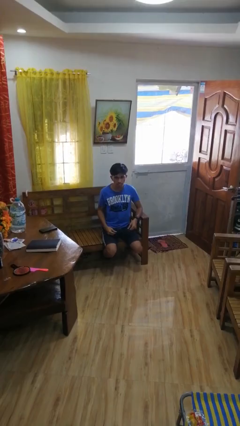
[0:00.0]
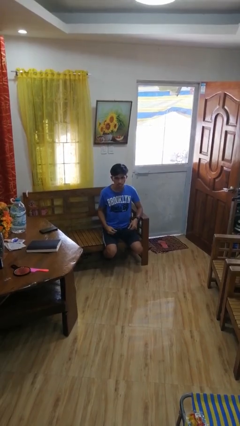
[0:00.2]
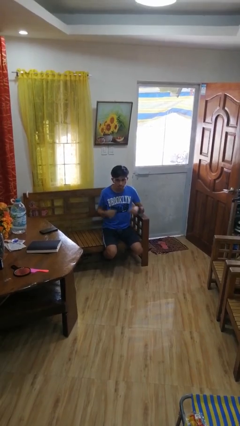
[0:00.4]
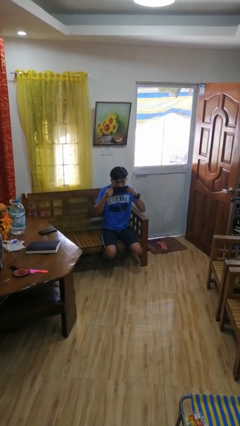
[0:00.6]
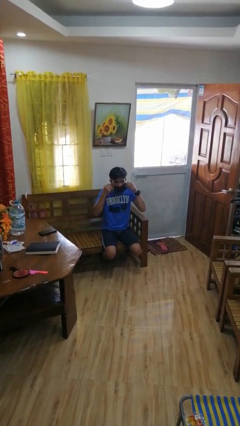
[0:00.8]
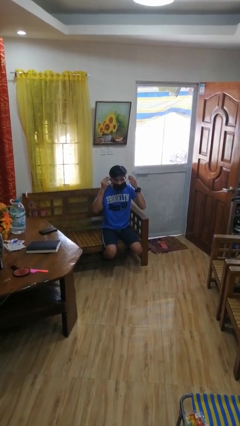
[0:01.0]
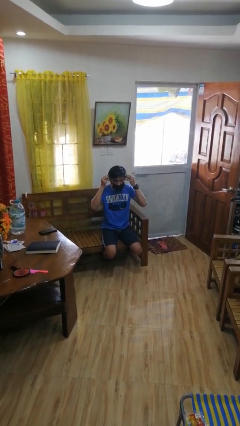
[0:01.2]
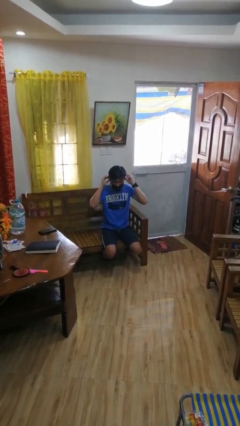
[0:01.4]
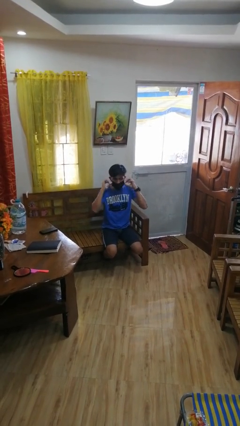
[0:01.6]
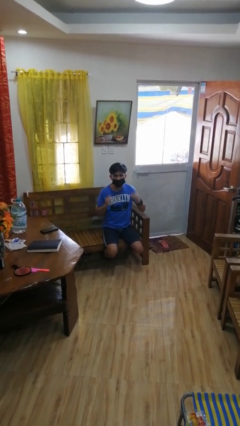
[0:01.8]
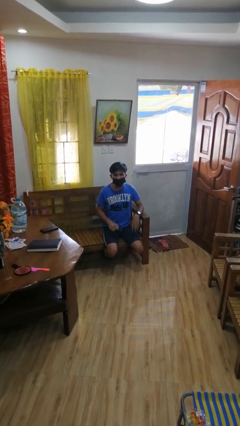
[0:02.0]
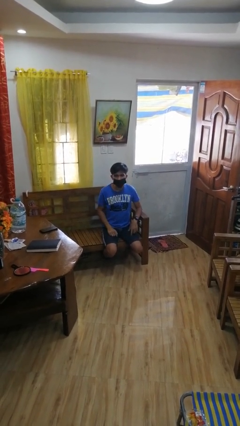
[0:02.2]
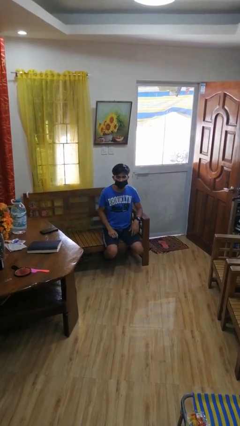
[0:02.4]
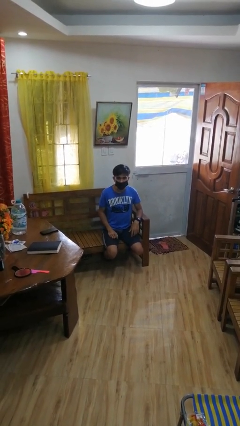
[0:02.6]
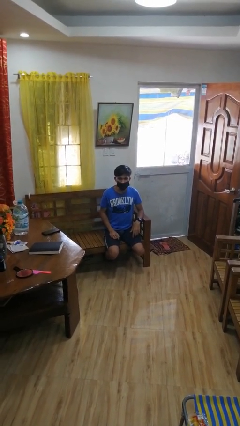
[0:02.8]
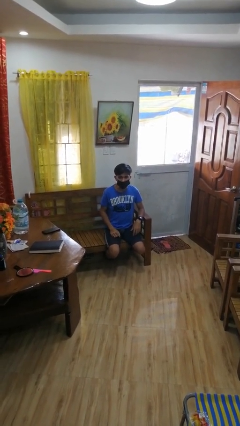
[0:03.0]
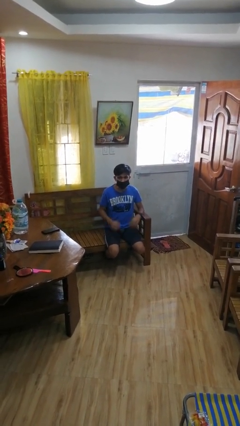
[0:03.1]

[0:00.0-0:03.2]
person puts on facemask

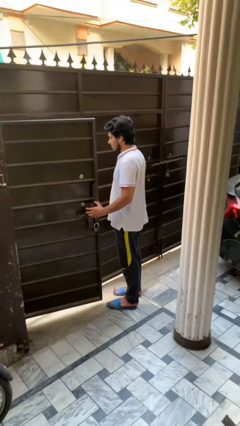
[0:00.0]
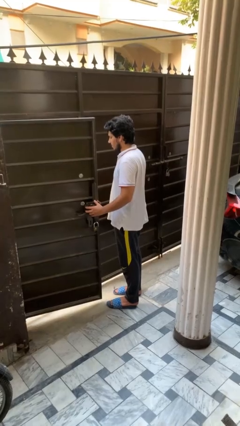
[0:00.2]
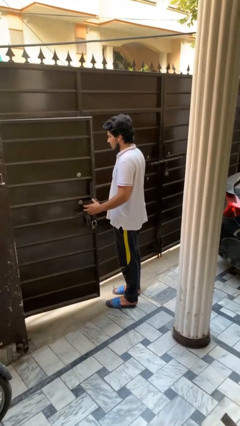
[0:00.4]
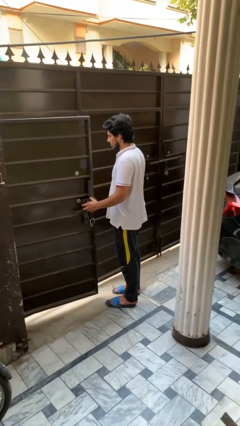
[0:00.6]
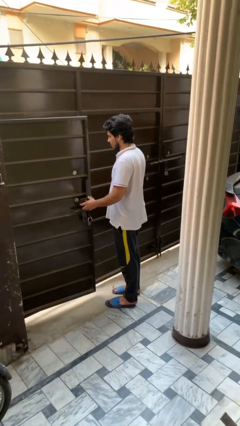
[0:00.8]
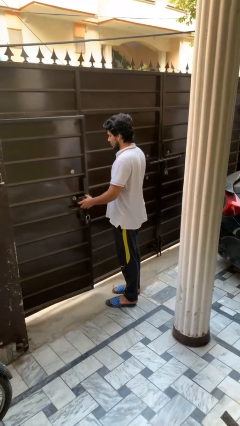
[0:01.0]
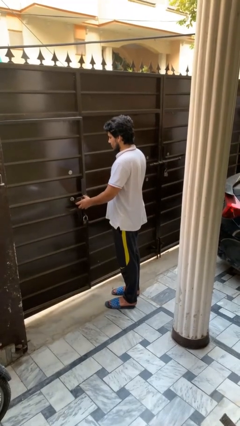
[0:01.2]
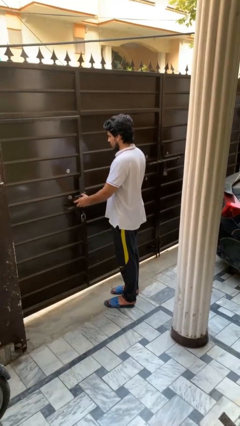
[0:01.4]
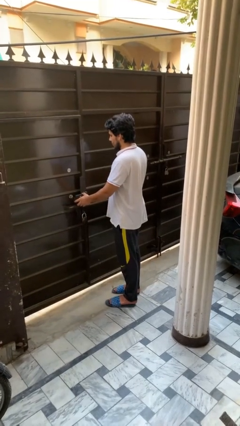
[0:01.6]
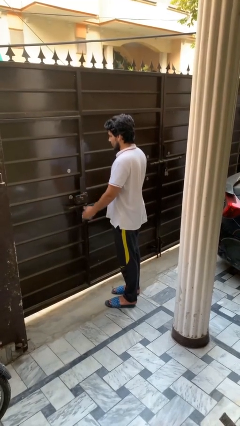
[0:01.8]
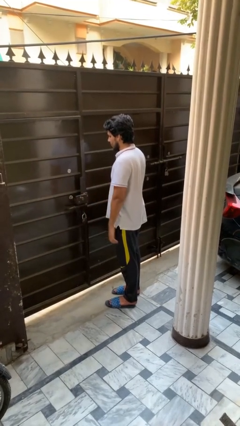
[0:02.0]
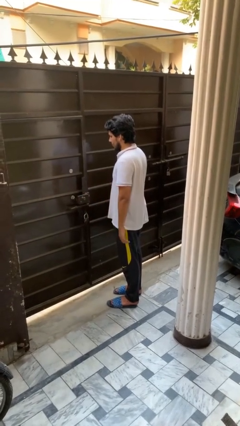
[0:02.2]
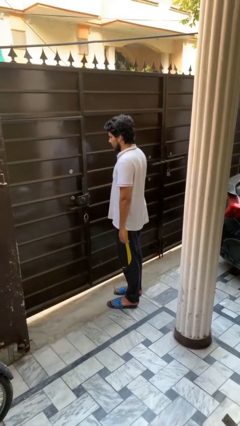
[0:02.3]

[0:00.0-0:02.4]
person closes gate

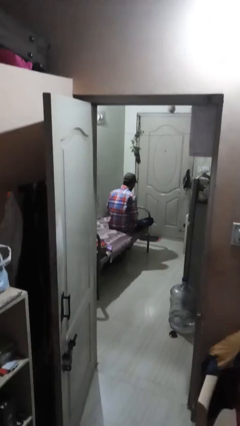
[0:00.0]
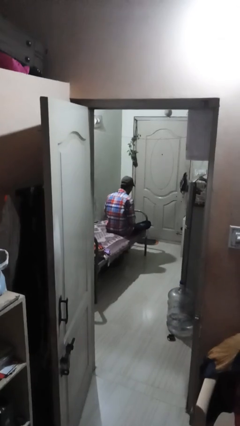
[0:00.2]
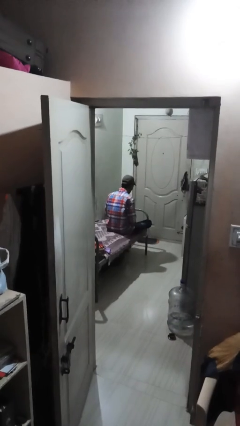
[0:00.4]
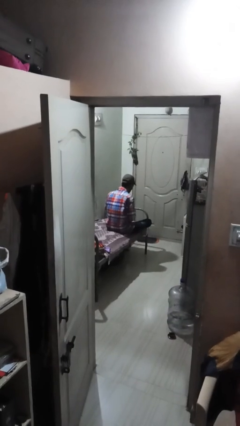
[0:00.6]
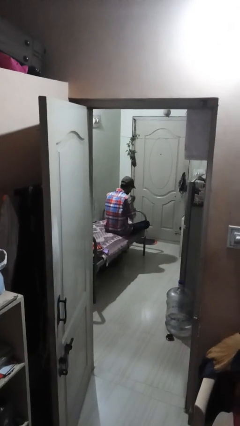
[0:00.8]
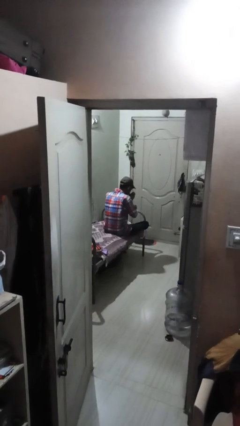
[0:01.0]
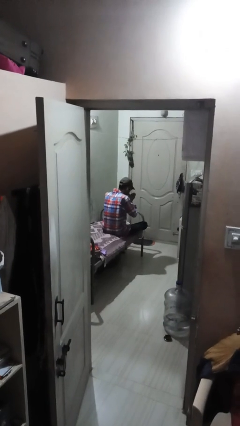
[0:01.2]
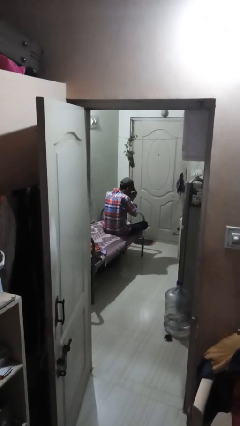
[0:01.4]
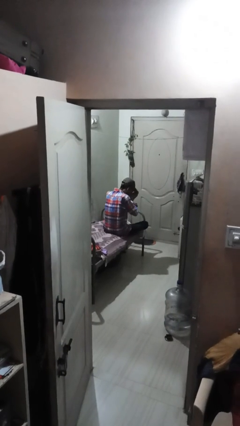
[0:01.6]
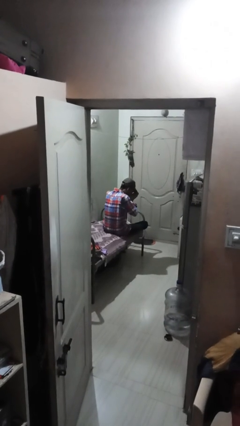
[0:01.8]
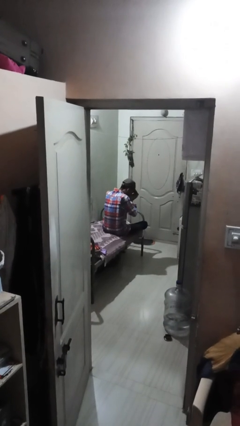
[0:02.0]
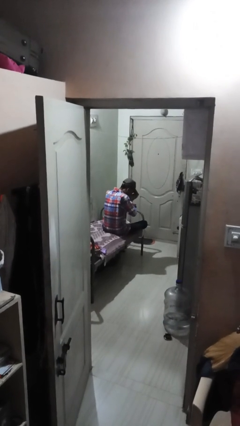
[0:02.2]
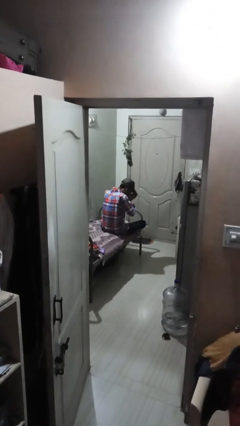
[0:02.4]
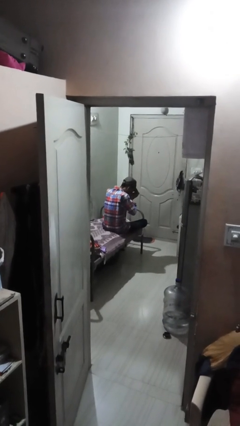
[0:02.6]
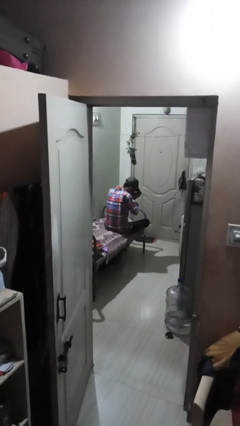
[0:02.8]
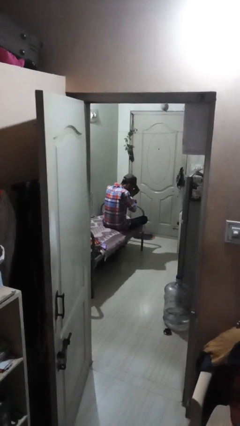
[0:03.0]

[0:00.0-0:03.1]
person prays

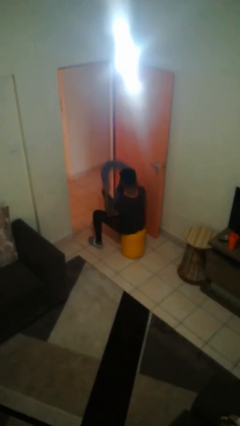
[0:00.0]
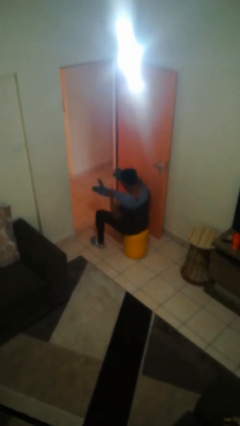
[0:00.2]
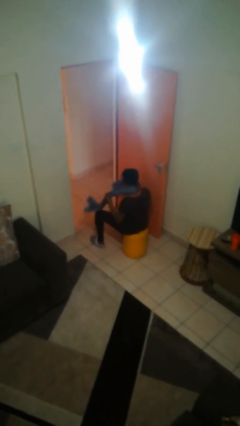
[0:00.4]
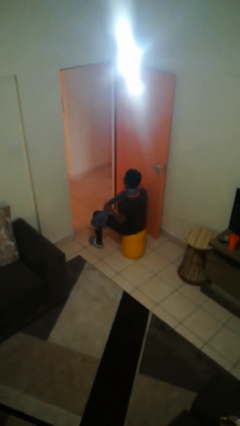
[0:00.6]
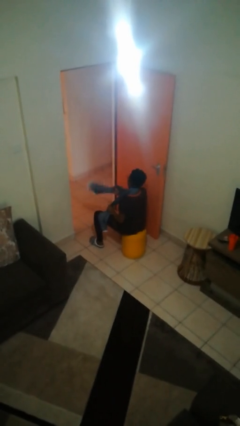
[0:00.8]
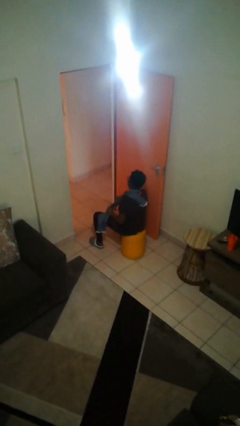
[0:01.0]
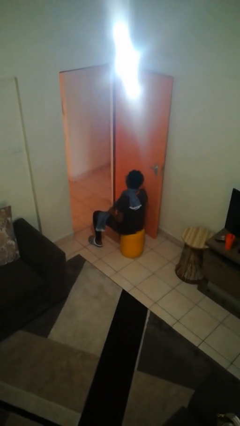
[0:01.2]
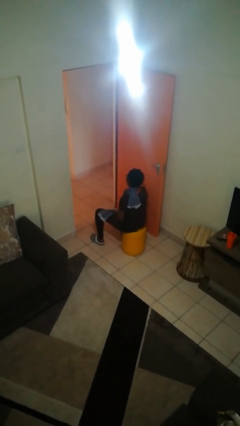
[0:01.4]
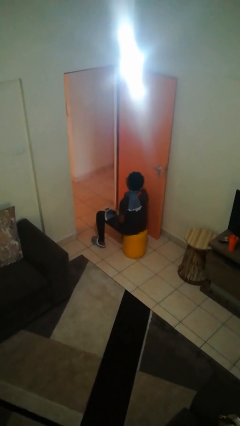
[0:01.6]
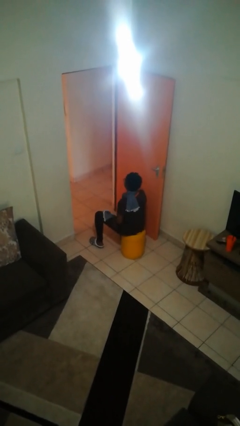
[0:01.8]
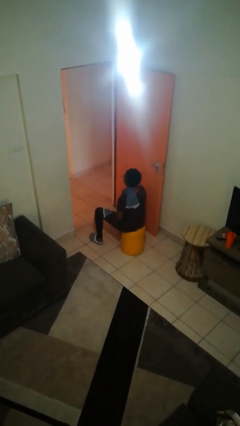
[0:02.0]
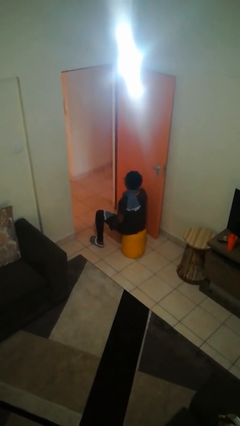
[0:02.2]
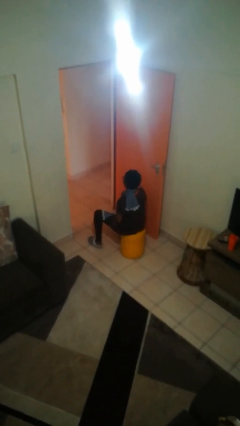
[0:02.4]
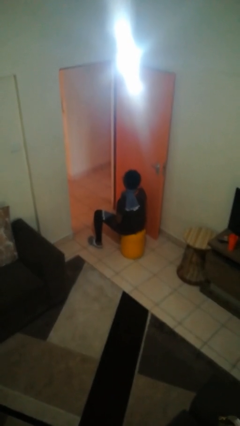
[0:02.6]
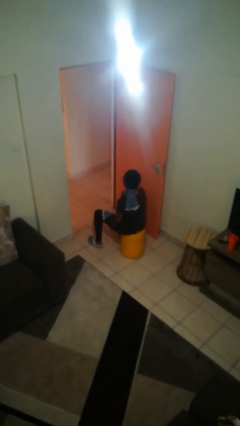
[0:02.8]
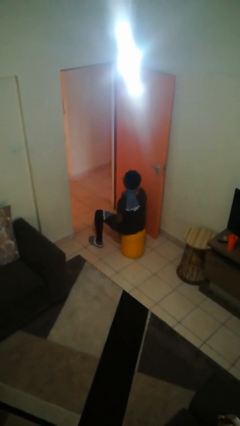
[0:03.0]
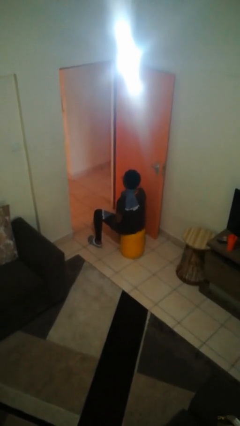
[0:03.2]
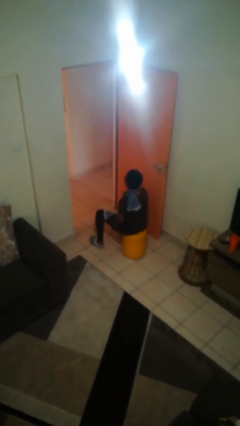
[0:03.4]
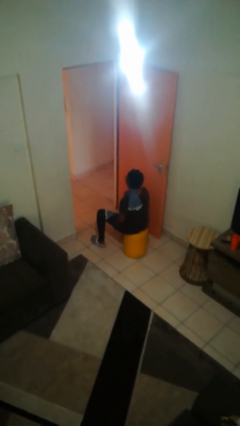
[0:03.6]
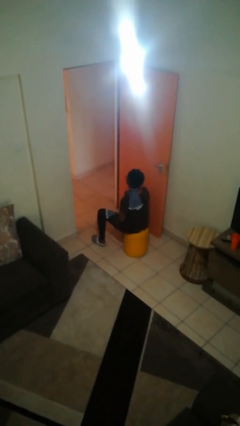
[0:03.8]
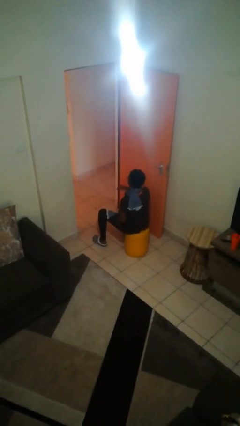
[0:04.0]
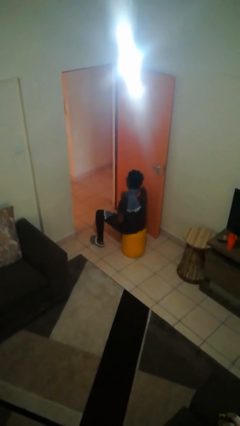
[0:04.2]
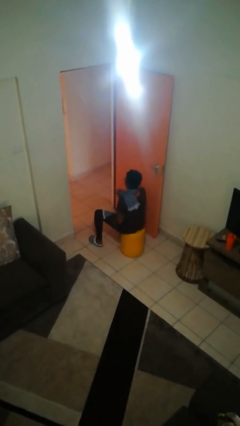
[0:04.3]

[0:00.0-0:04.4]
person puts on scarf

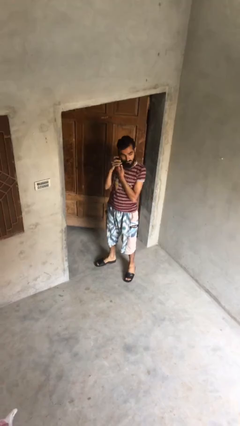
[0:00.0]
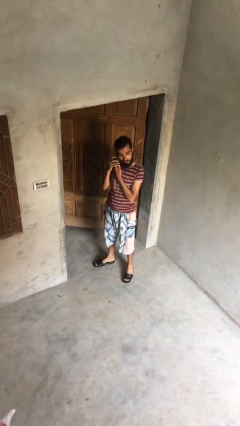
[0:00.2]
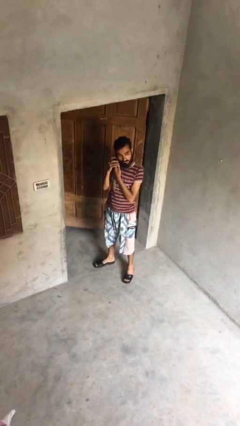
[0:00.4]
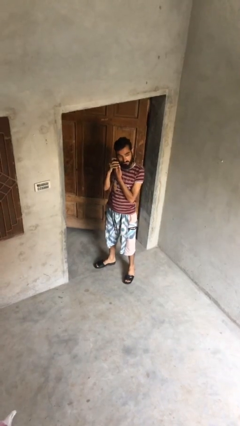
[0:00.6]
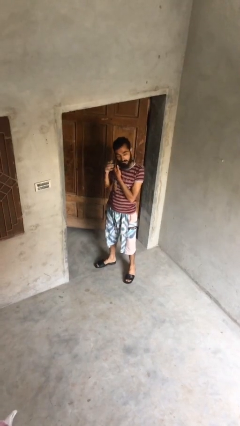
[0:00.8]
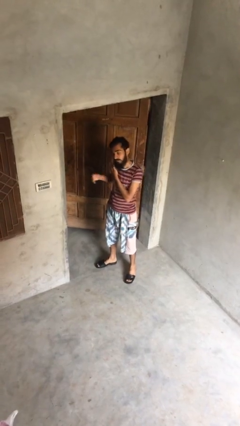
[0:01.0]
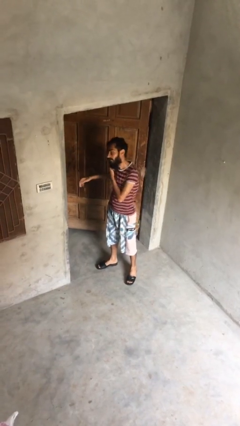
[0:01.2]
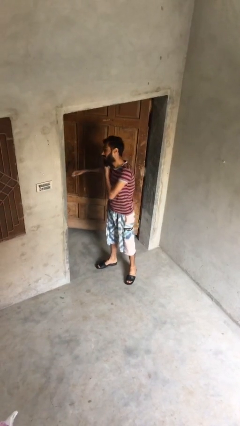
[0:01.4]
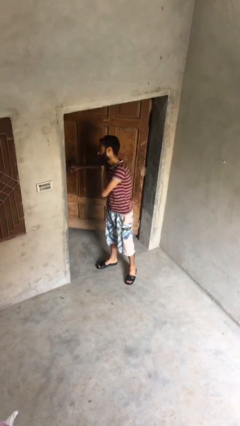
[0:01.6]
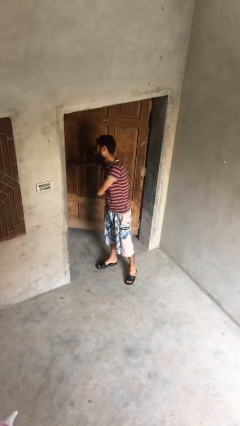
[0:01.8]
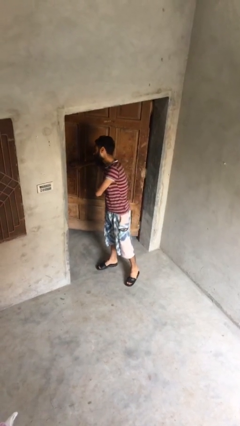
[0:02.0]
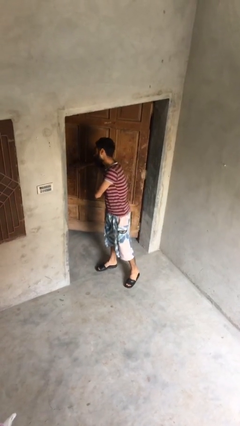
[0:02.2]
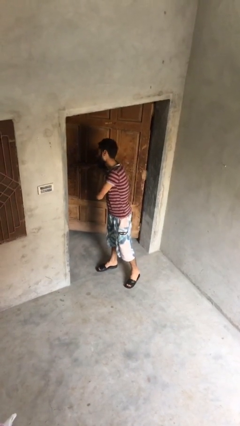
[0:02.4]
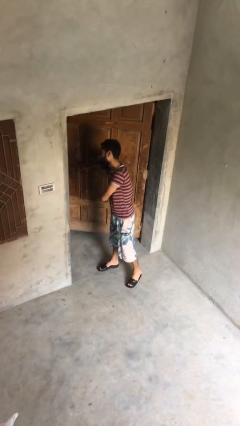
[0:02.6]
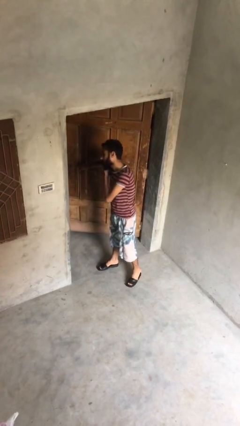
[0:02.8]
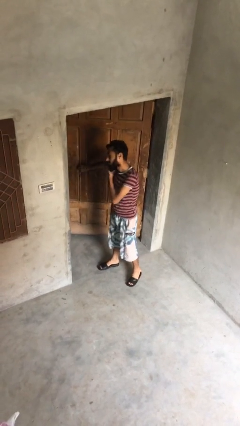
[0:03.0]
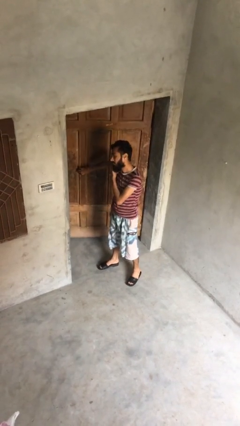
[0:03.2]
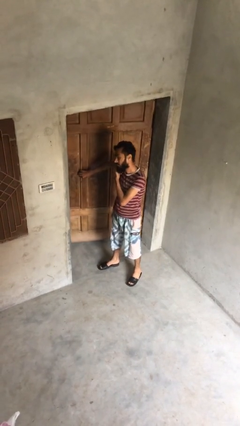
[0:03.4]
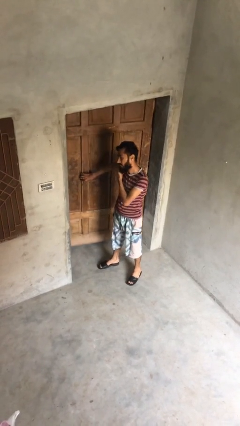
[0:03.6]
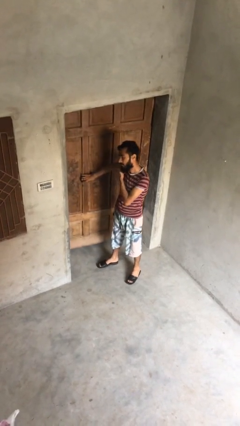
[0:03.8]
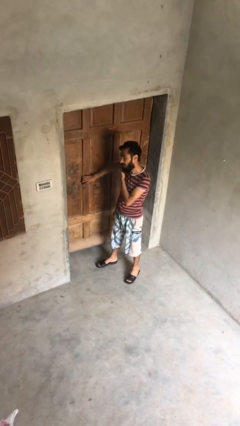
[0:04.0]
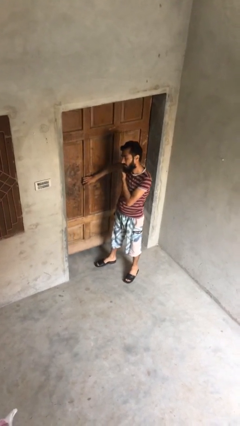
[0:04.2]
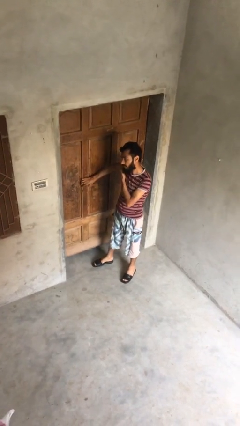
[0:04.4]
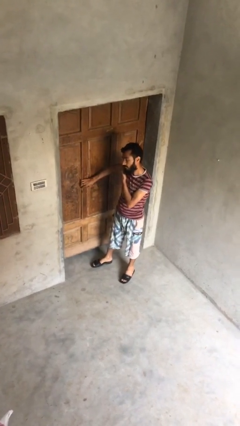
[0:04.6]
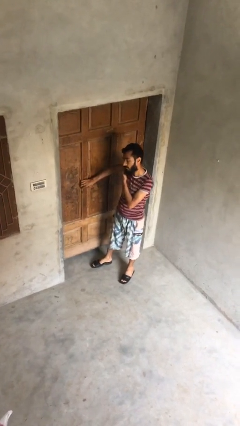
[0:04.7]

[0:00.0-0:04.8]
person closes facility door
